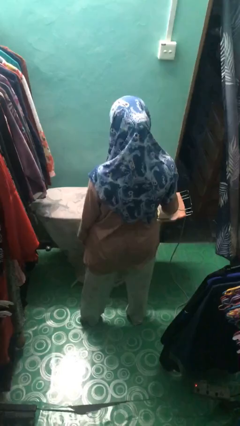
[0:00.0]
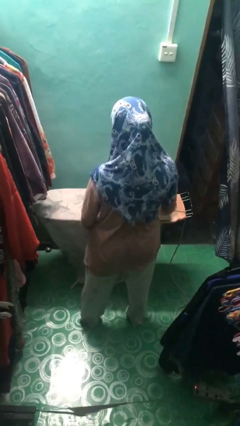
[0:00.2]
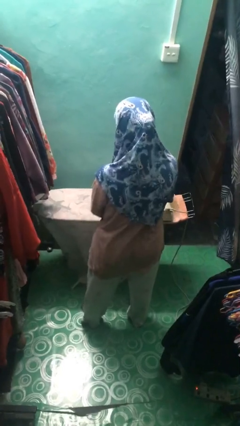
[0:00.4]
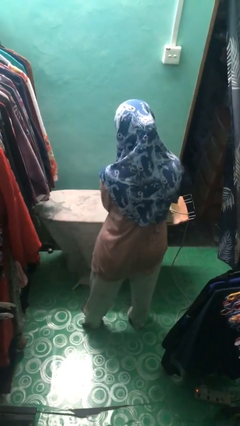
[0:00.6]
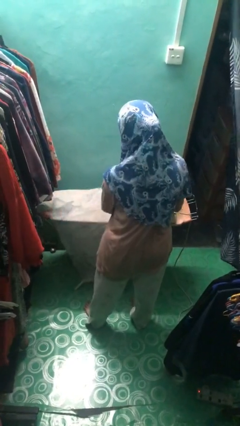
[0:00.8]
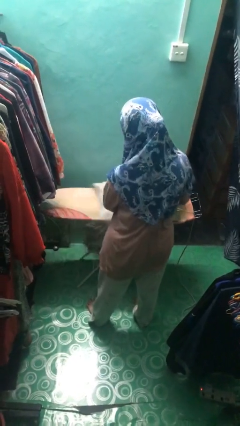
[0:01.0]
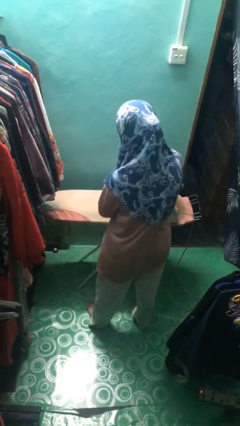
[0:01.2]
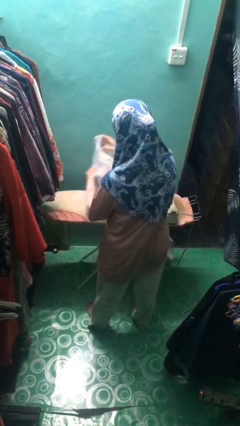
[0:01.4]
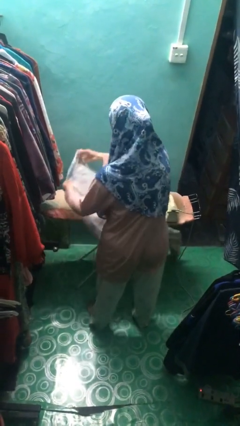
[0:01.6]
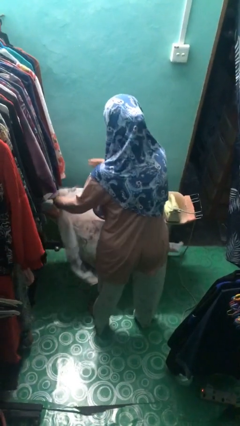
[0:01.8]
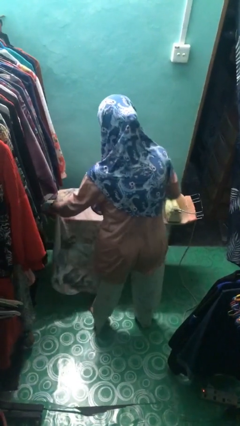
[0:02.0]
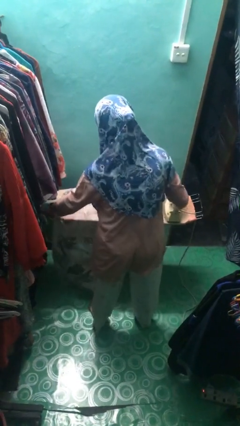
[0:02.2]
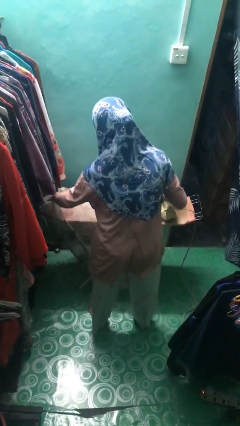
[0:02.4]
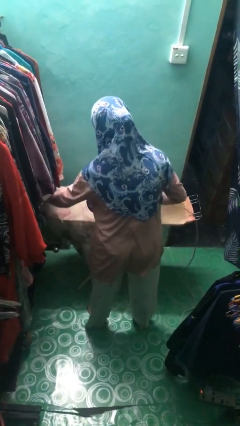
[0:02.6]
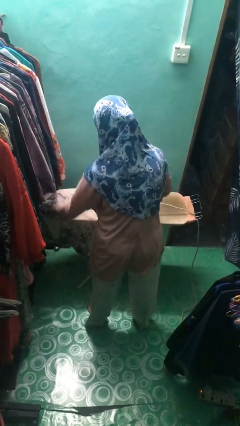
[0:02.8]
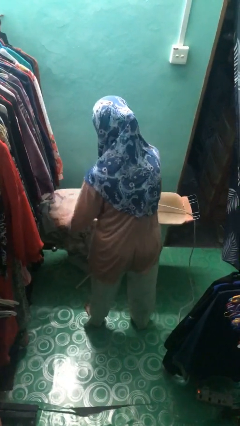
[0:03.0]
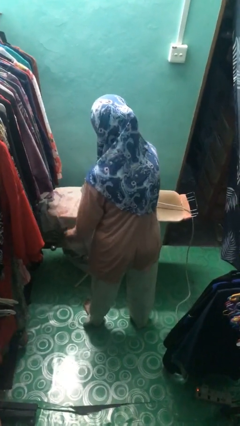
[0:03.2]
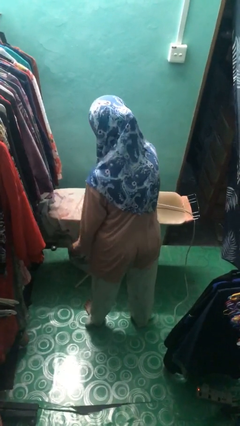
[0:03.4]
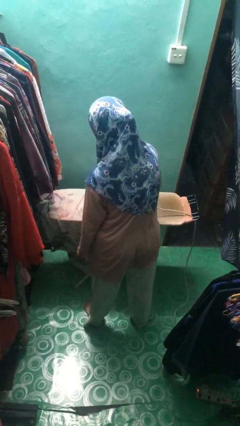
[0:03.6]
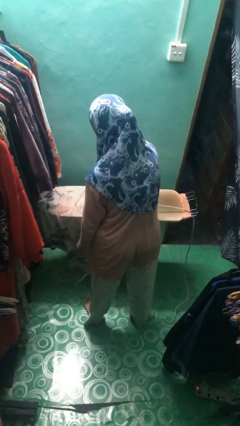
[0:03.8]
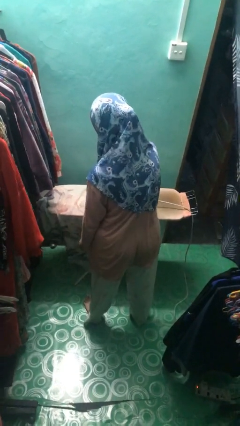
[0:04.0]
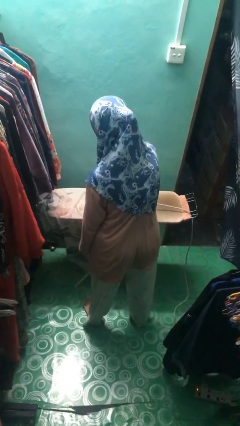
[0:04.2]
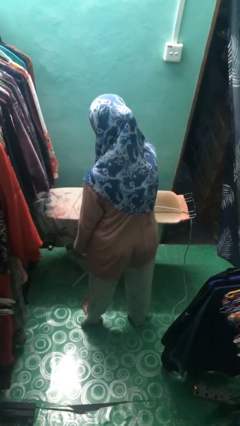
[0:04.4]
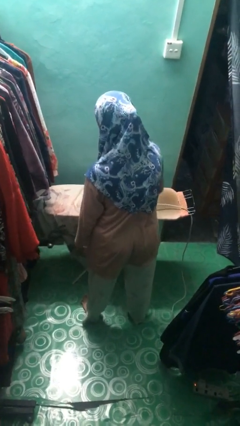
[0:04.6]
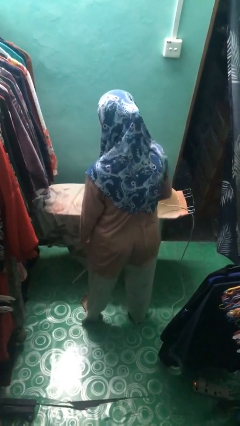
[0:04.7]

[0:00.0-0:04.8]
person irons clothes

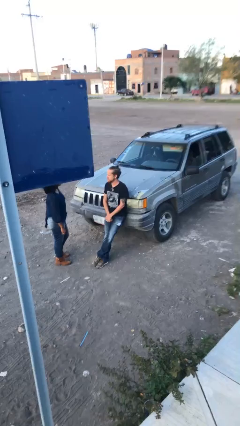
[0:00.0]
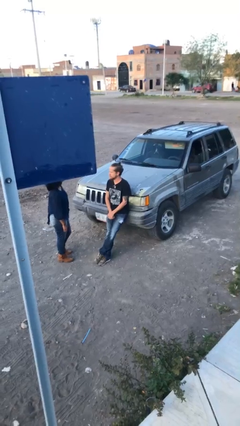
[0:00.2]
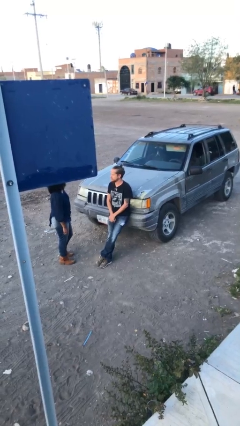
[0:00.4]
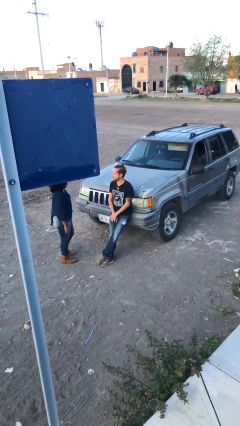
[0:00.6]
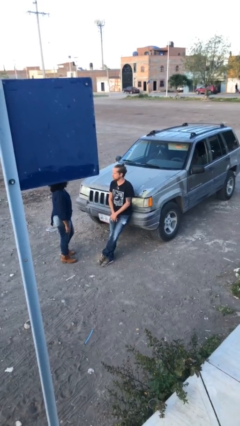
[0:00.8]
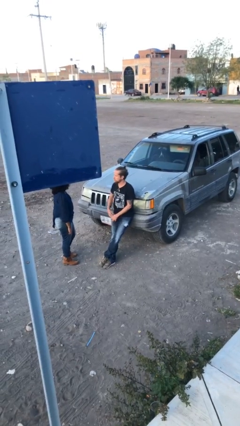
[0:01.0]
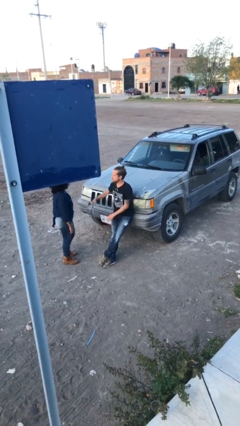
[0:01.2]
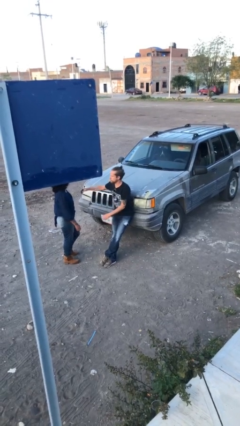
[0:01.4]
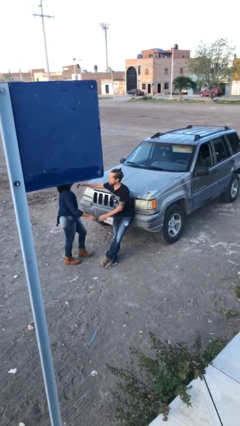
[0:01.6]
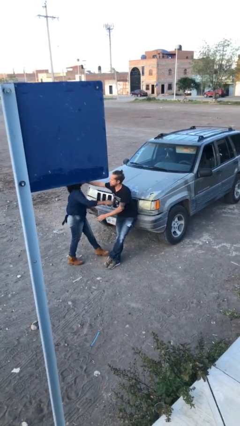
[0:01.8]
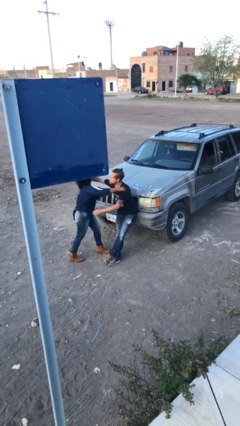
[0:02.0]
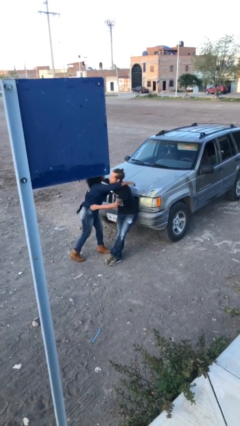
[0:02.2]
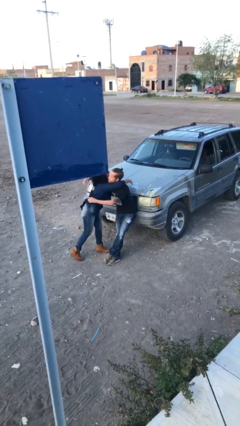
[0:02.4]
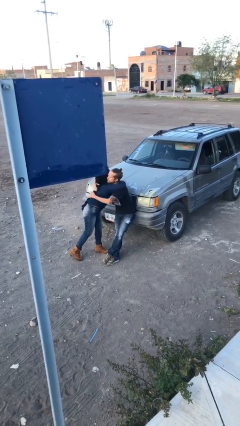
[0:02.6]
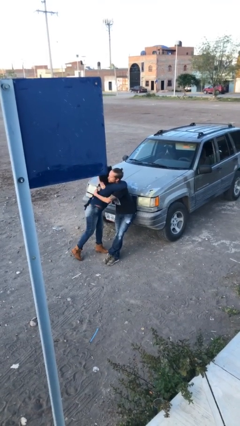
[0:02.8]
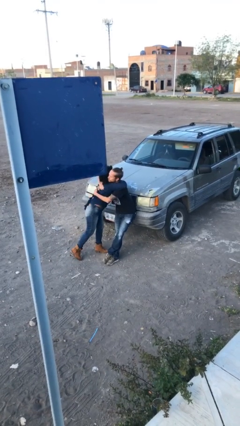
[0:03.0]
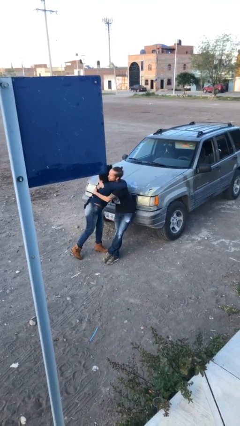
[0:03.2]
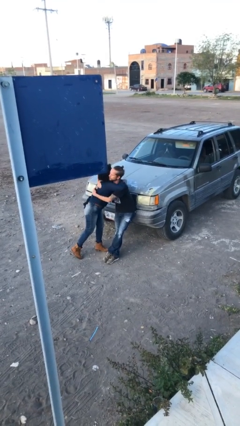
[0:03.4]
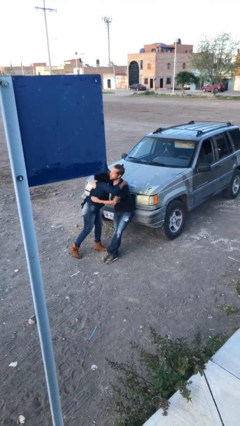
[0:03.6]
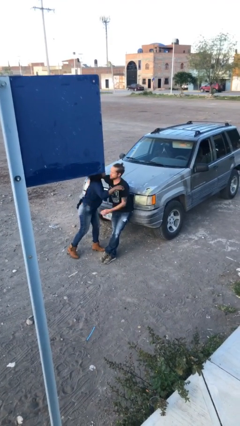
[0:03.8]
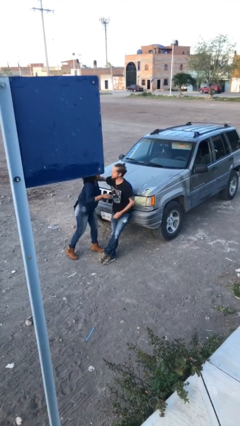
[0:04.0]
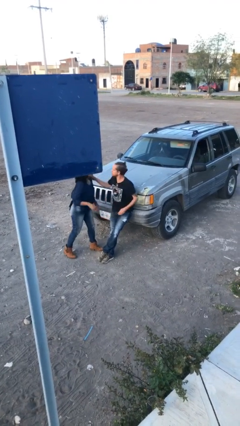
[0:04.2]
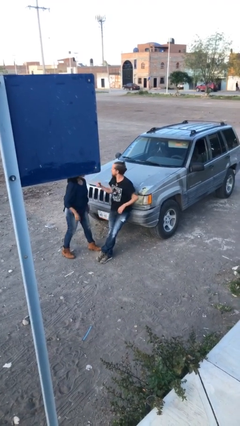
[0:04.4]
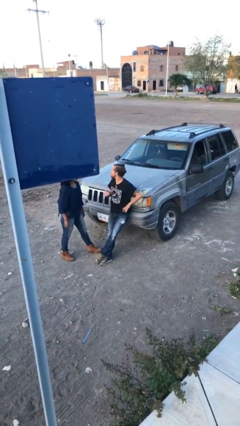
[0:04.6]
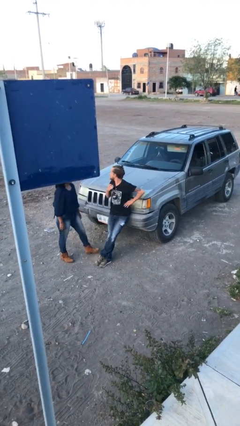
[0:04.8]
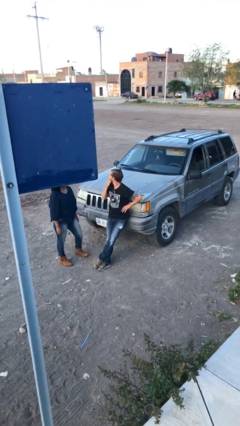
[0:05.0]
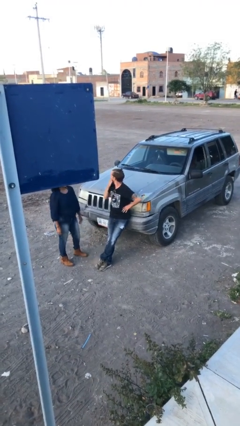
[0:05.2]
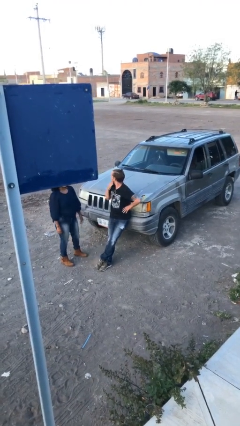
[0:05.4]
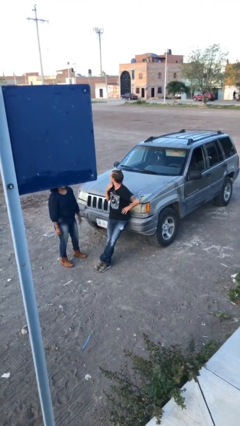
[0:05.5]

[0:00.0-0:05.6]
person embraces person

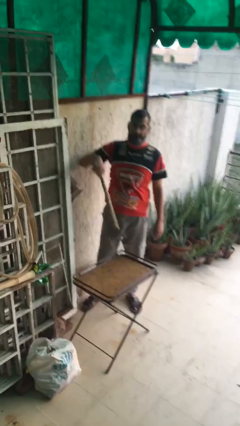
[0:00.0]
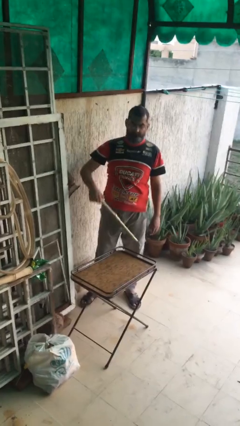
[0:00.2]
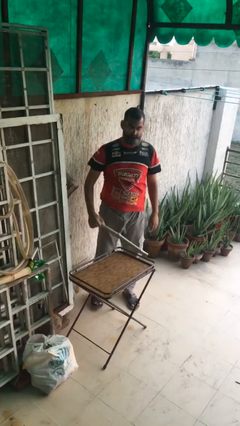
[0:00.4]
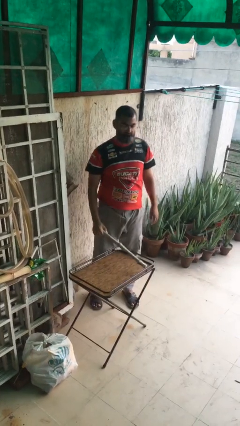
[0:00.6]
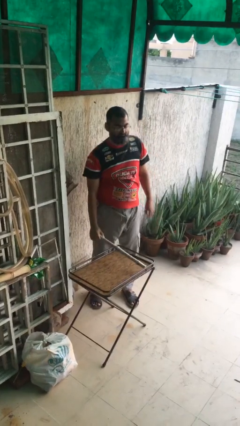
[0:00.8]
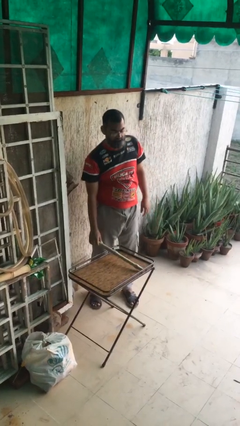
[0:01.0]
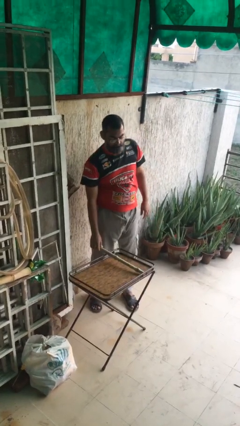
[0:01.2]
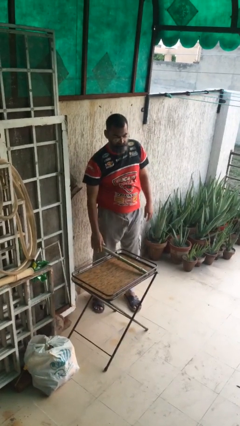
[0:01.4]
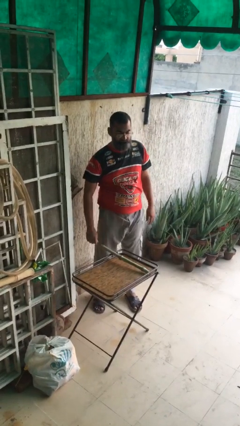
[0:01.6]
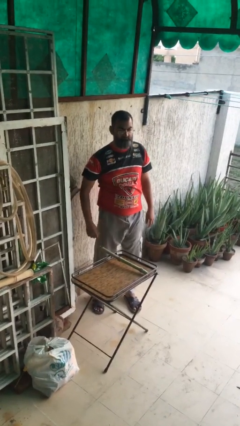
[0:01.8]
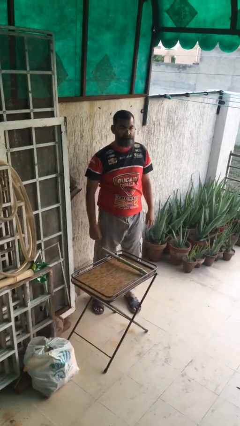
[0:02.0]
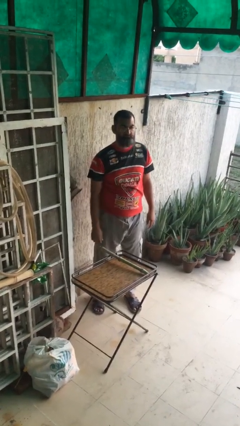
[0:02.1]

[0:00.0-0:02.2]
person puts down object on table

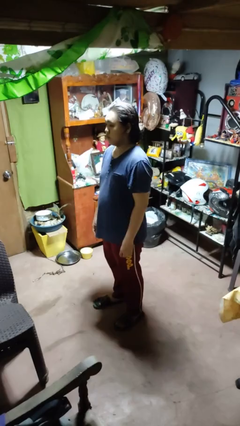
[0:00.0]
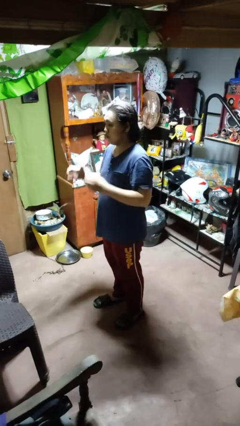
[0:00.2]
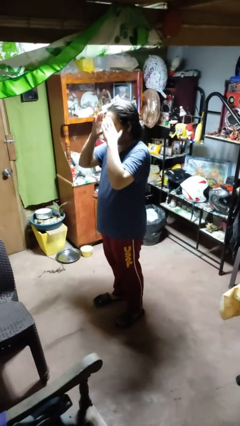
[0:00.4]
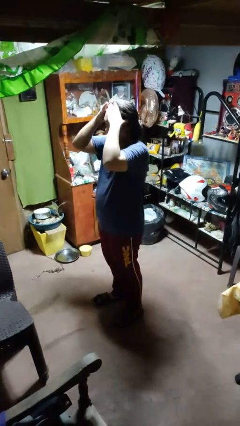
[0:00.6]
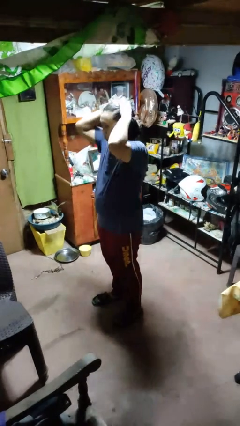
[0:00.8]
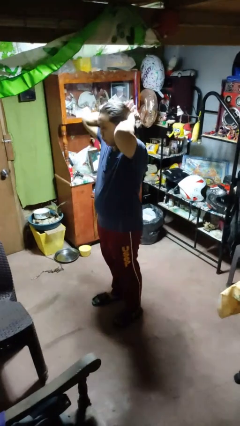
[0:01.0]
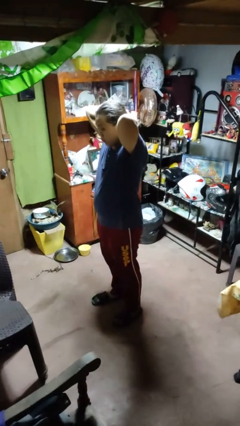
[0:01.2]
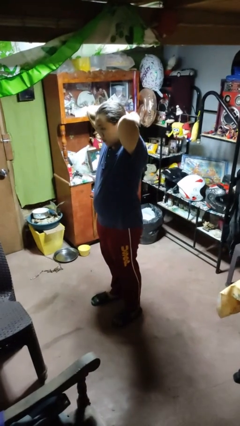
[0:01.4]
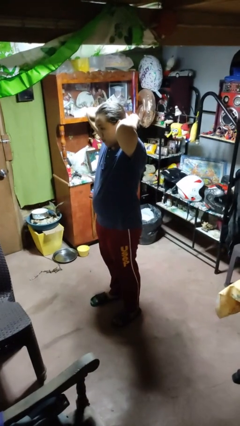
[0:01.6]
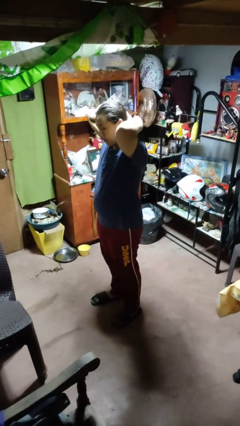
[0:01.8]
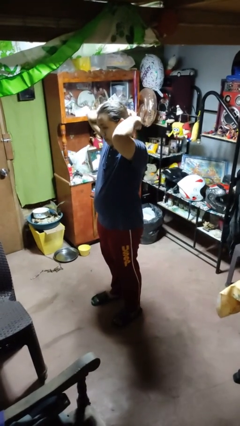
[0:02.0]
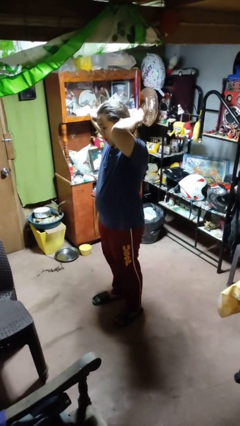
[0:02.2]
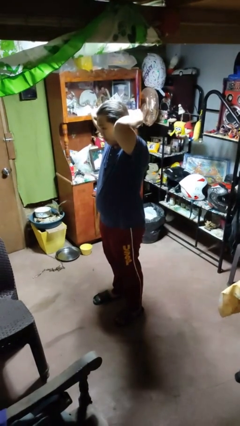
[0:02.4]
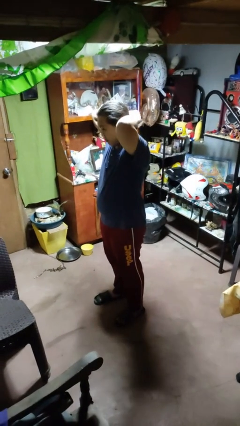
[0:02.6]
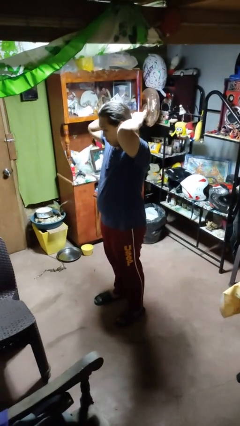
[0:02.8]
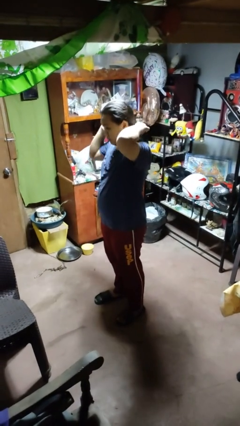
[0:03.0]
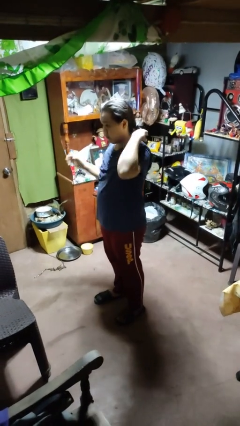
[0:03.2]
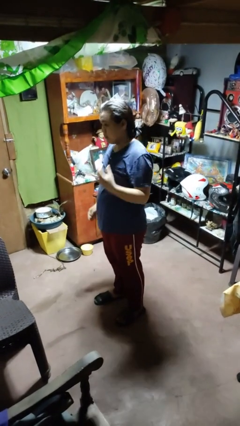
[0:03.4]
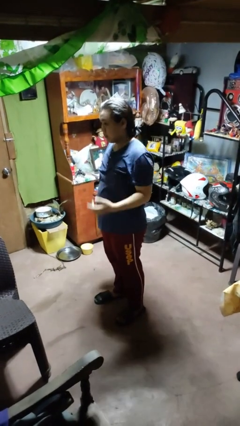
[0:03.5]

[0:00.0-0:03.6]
person puts hair in ponytail

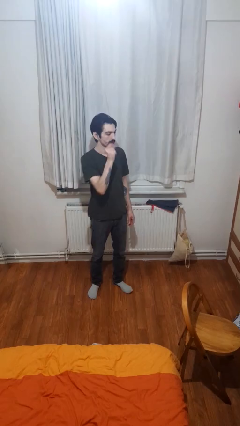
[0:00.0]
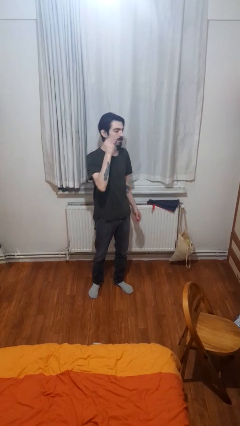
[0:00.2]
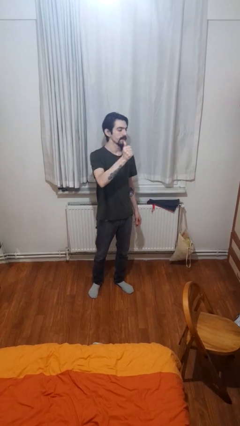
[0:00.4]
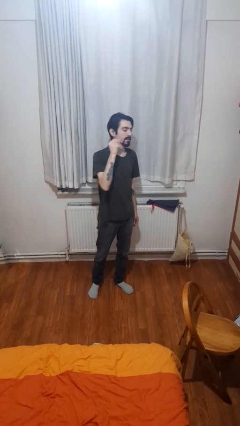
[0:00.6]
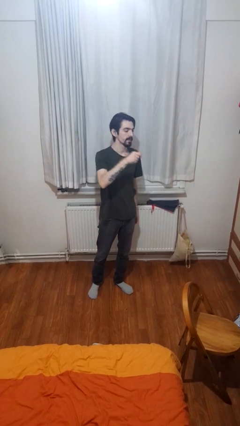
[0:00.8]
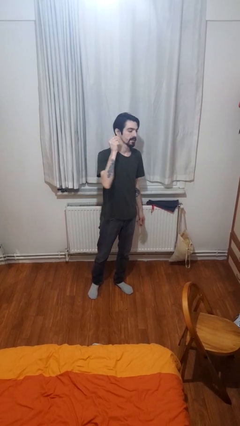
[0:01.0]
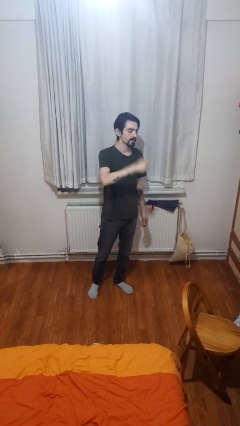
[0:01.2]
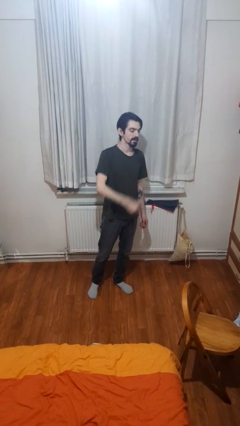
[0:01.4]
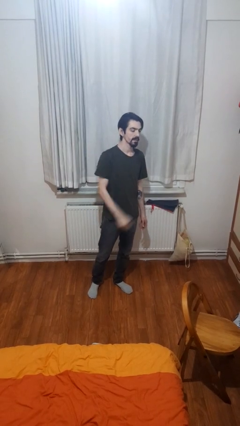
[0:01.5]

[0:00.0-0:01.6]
person snaps fingers
